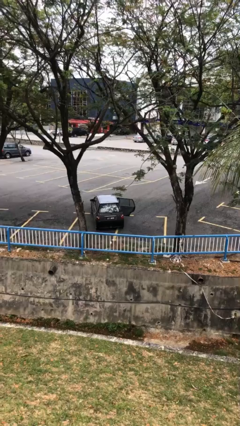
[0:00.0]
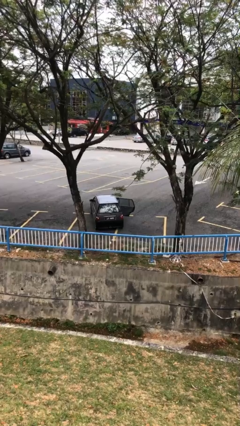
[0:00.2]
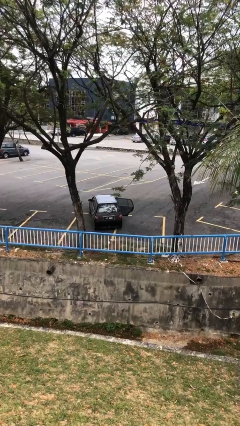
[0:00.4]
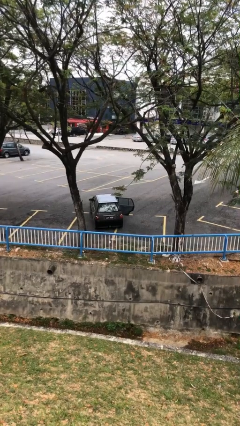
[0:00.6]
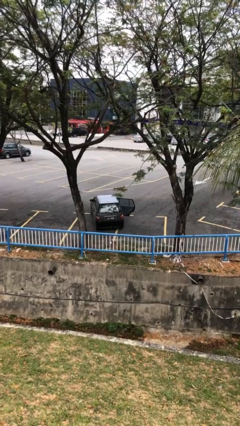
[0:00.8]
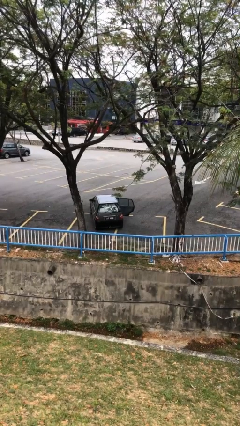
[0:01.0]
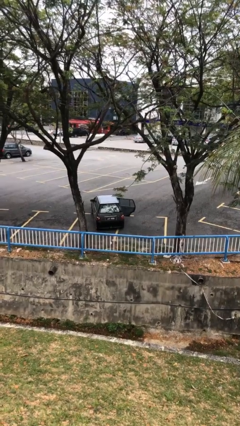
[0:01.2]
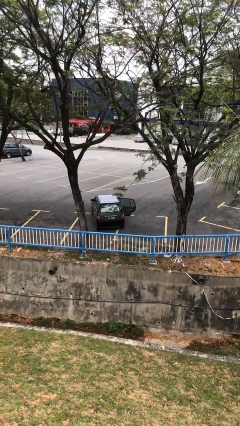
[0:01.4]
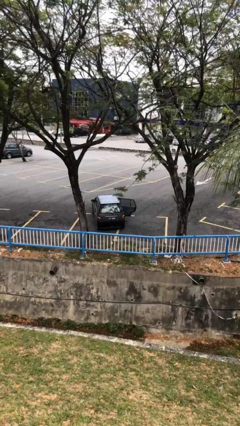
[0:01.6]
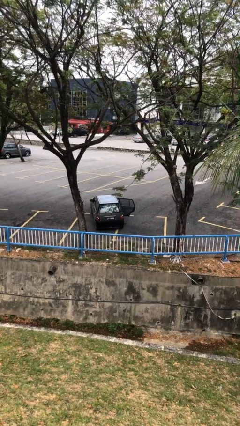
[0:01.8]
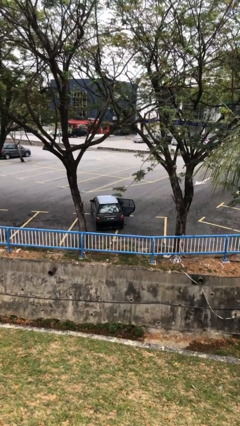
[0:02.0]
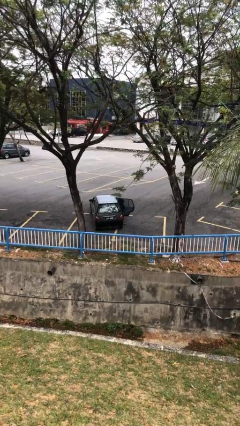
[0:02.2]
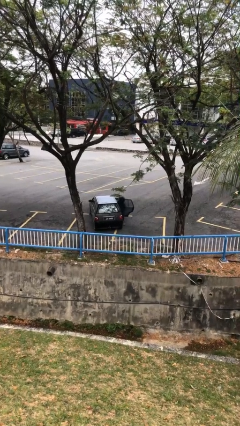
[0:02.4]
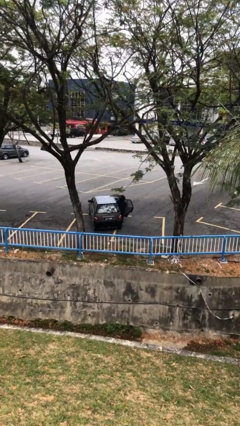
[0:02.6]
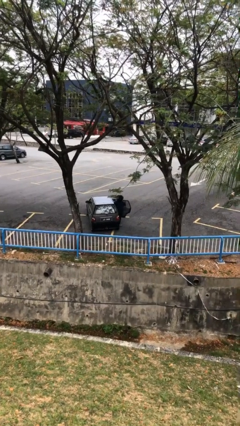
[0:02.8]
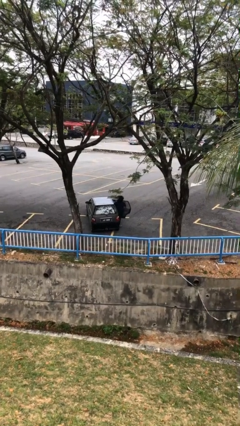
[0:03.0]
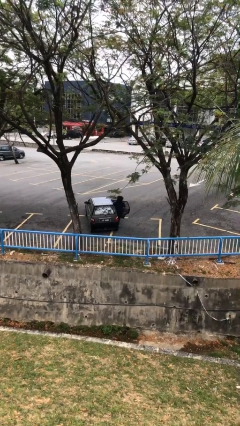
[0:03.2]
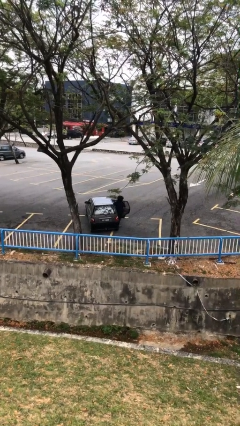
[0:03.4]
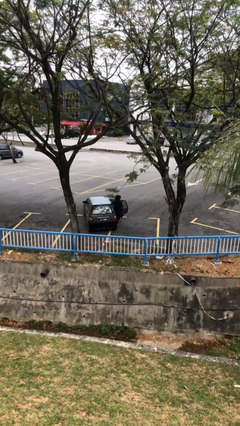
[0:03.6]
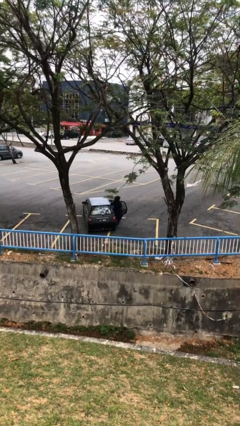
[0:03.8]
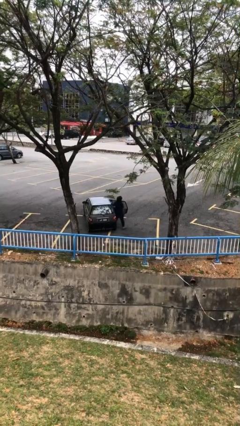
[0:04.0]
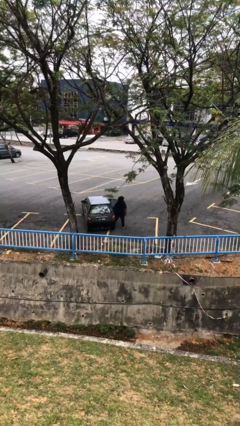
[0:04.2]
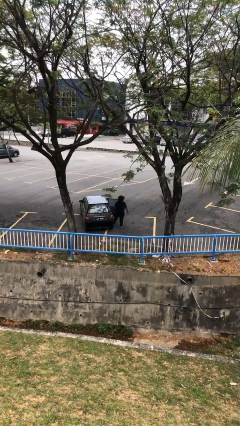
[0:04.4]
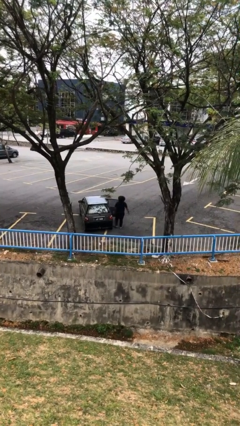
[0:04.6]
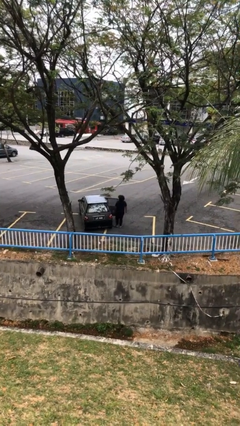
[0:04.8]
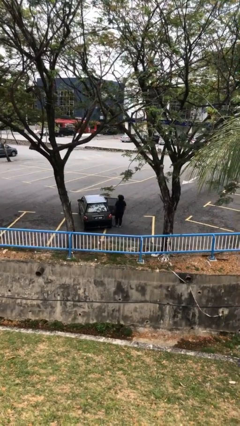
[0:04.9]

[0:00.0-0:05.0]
person exits car

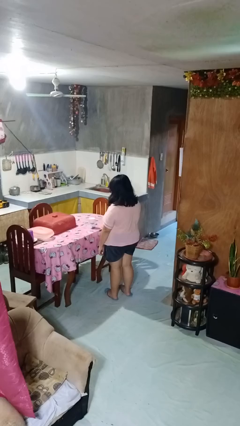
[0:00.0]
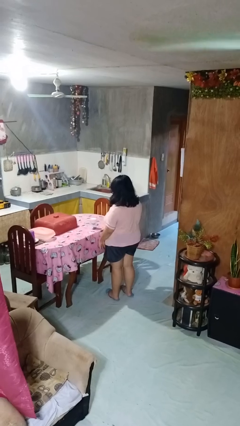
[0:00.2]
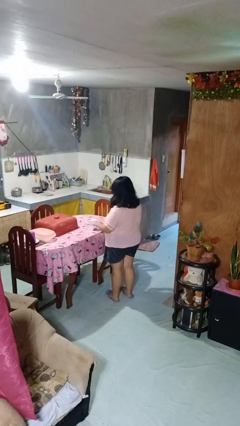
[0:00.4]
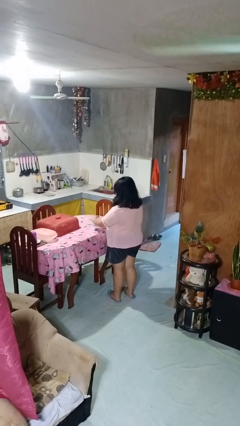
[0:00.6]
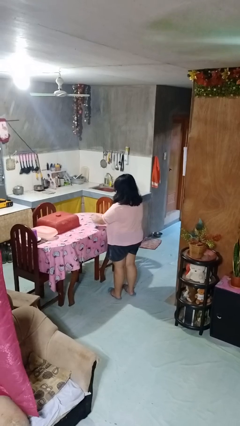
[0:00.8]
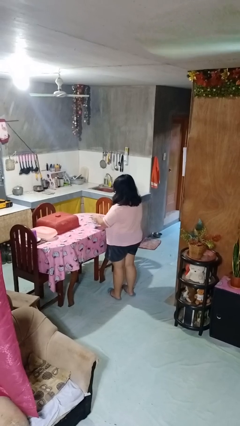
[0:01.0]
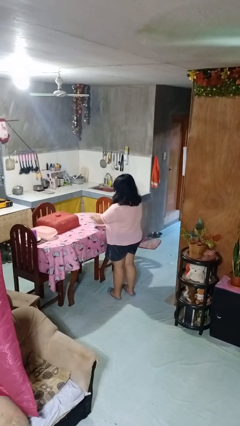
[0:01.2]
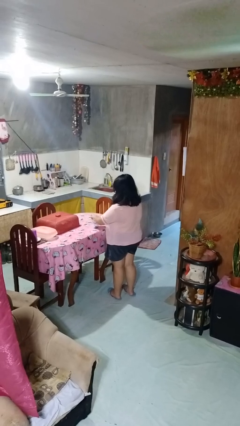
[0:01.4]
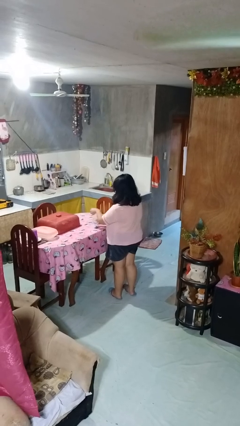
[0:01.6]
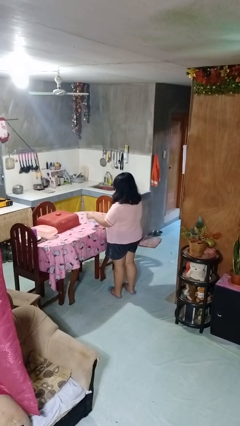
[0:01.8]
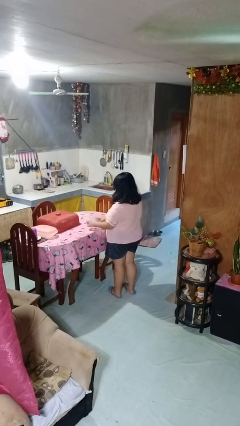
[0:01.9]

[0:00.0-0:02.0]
person opens jar

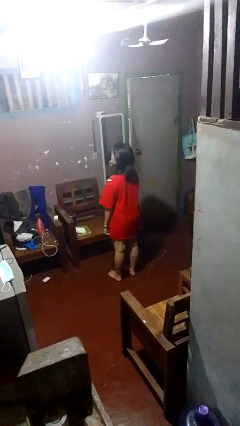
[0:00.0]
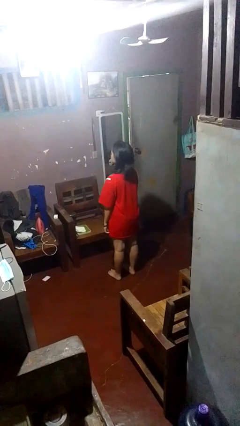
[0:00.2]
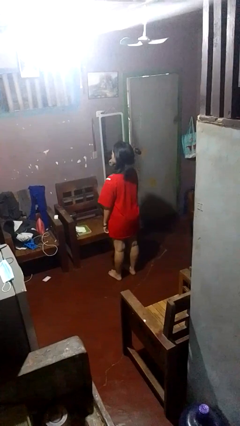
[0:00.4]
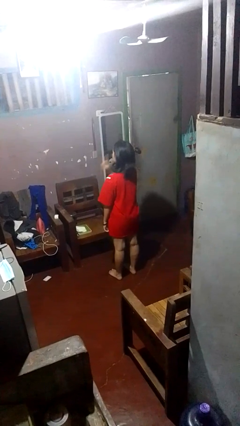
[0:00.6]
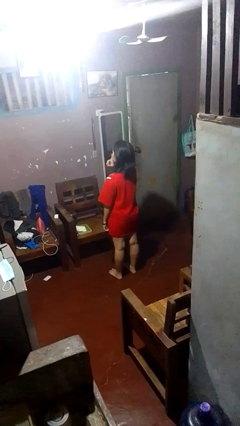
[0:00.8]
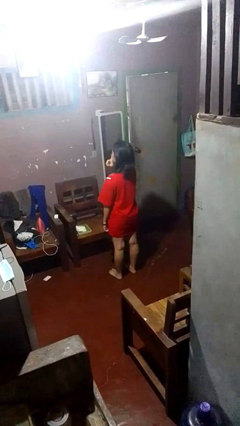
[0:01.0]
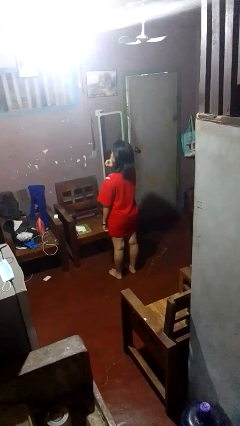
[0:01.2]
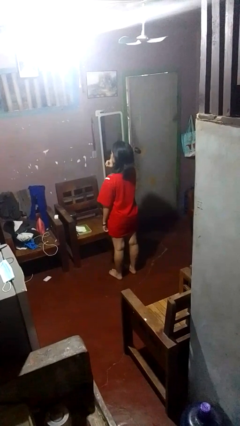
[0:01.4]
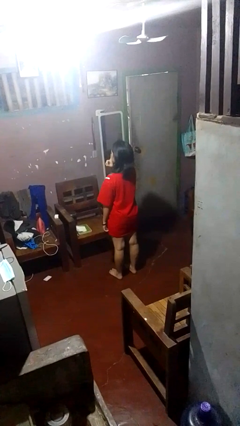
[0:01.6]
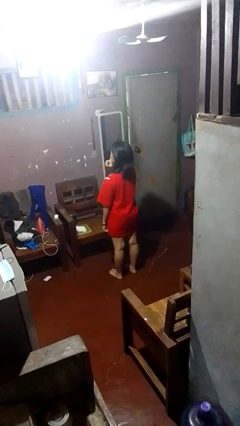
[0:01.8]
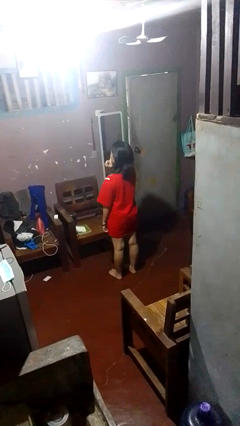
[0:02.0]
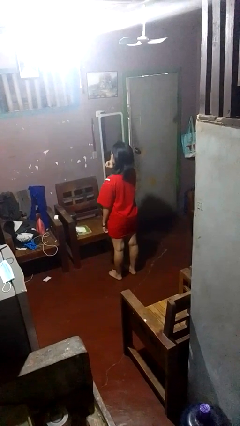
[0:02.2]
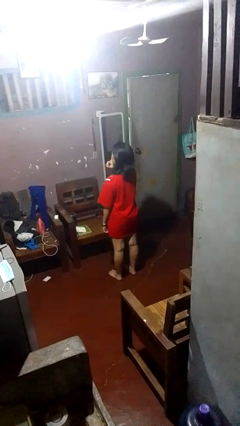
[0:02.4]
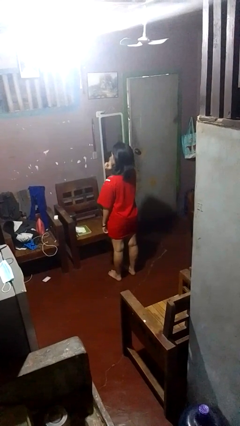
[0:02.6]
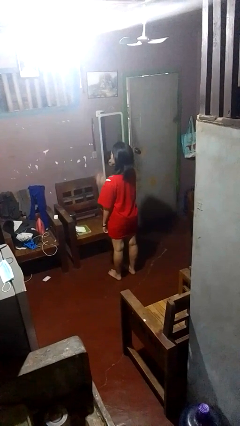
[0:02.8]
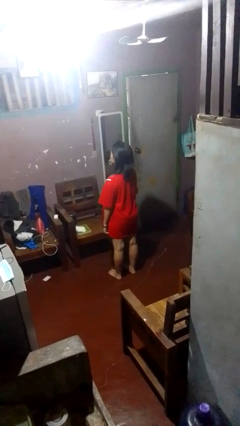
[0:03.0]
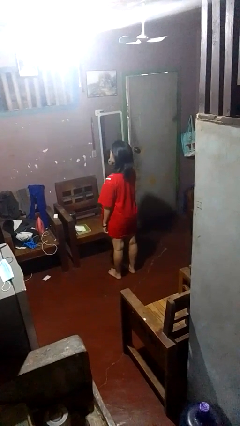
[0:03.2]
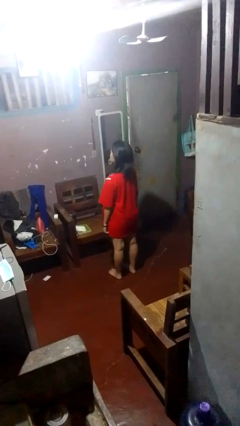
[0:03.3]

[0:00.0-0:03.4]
person gestures be quiet

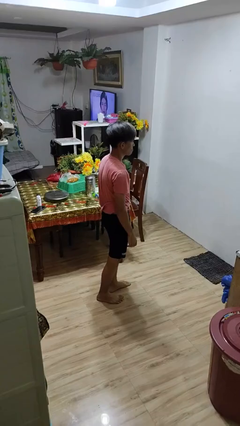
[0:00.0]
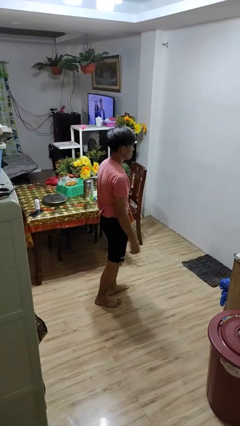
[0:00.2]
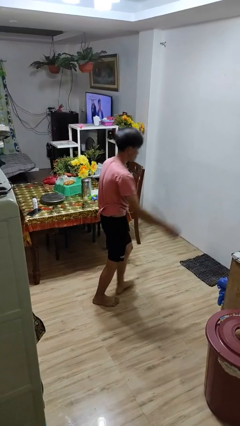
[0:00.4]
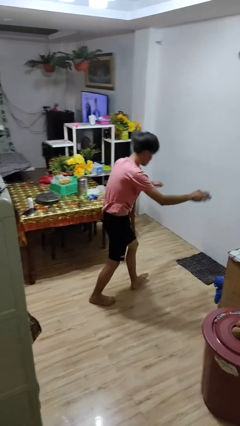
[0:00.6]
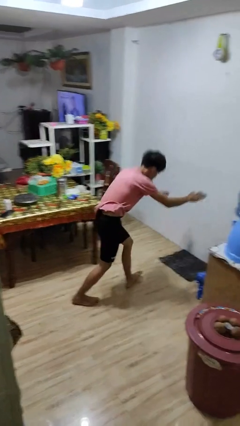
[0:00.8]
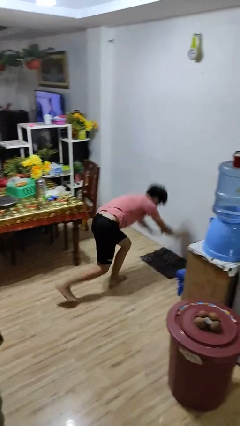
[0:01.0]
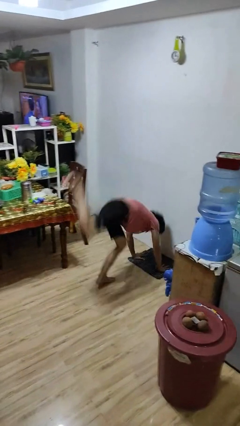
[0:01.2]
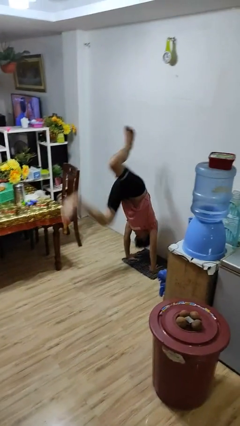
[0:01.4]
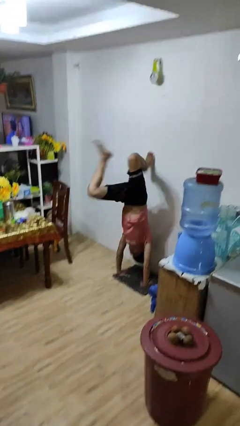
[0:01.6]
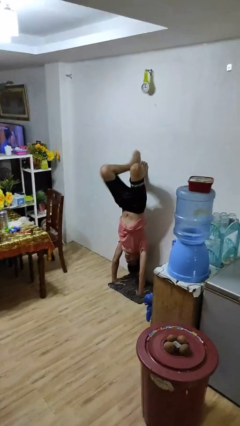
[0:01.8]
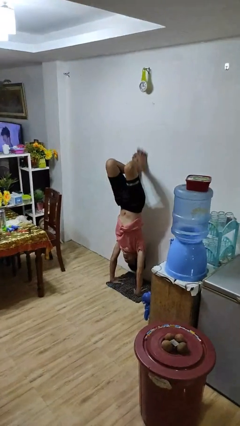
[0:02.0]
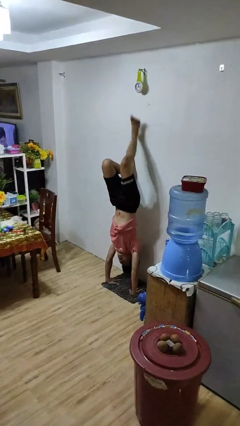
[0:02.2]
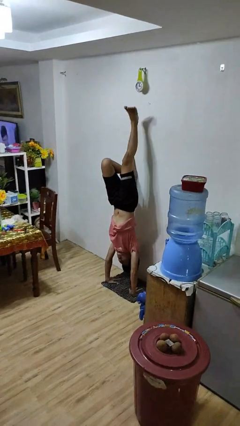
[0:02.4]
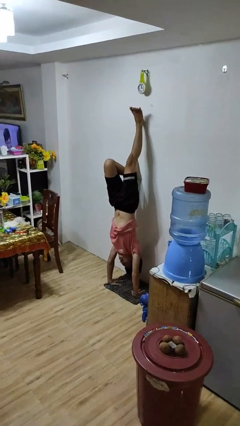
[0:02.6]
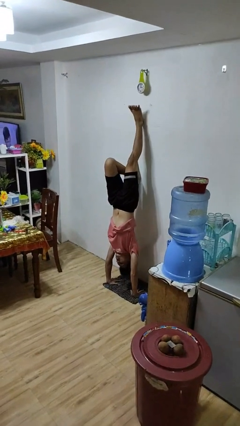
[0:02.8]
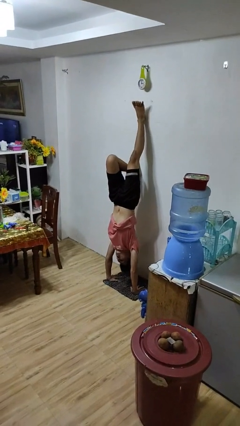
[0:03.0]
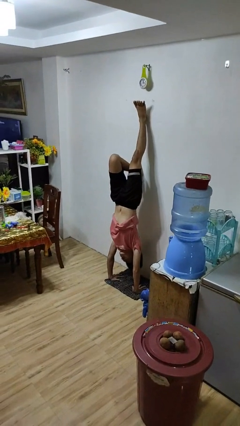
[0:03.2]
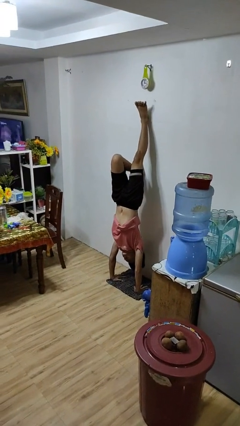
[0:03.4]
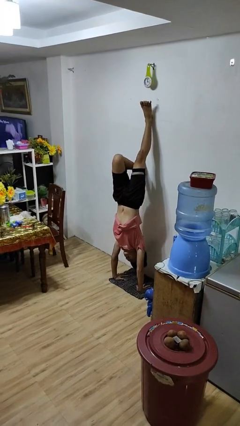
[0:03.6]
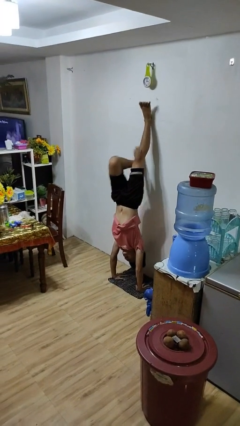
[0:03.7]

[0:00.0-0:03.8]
person handstand

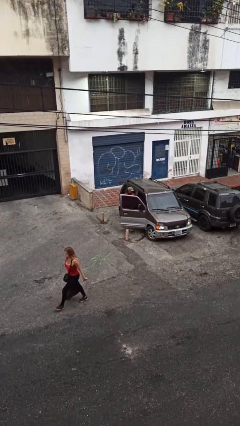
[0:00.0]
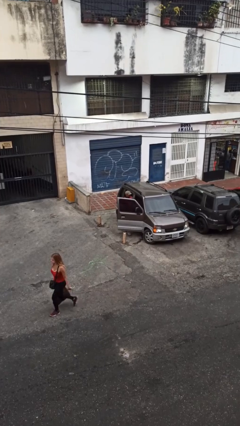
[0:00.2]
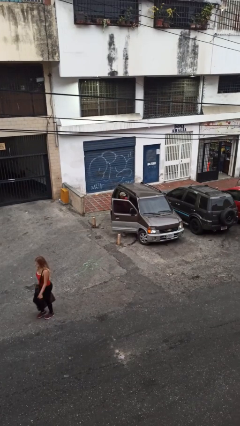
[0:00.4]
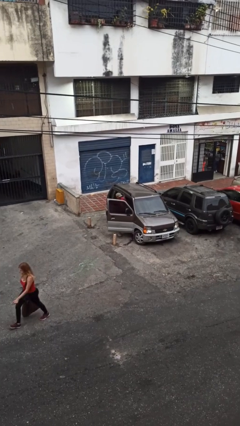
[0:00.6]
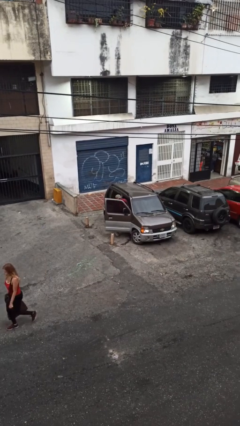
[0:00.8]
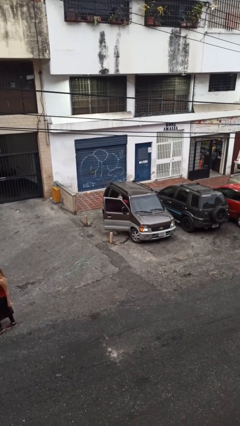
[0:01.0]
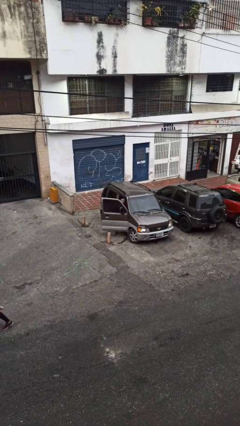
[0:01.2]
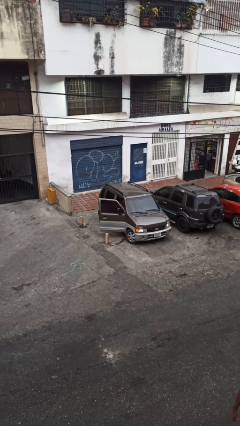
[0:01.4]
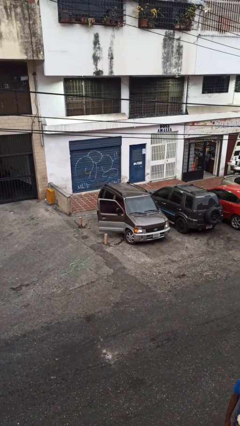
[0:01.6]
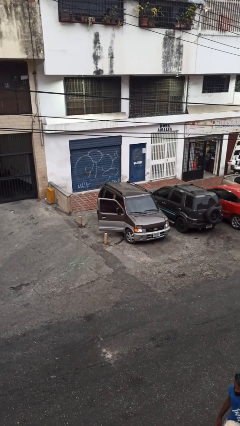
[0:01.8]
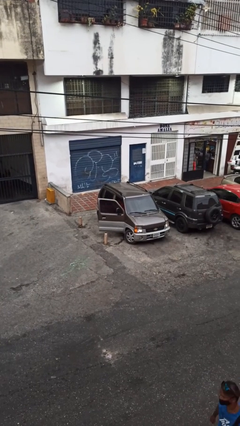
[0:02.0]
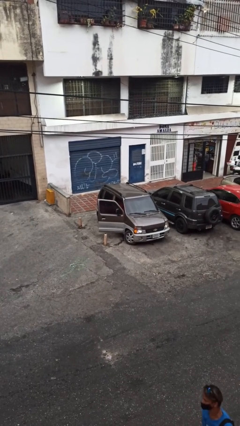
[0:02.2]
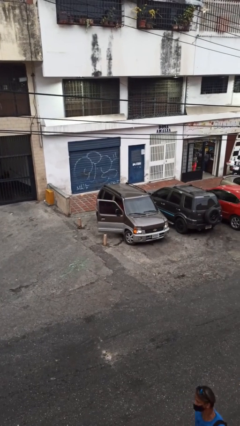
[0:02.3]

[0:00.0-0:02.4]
person enters car

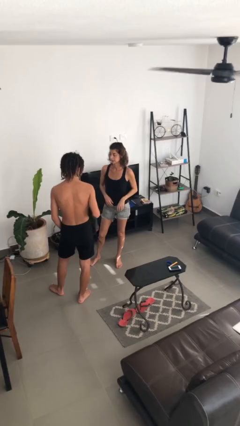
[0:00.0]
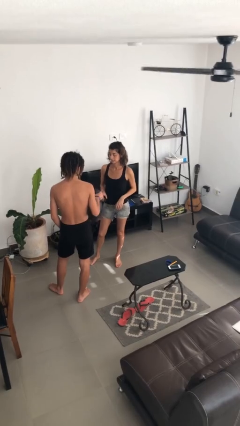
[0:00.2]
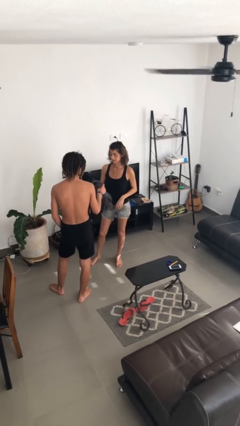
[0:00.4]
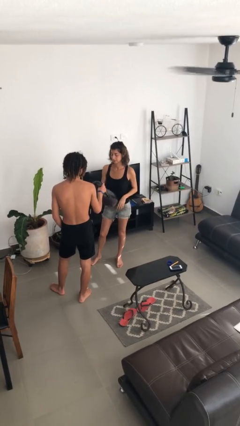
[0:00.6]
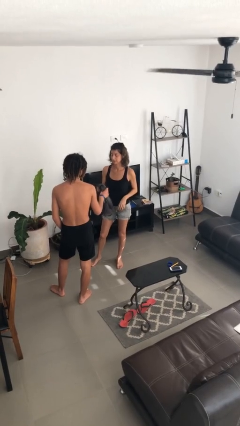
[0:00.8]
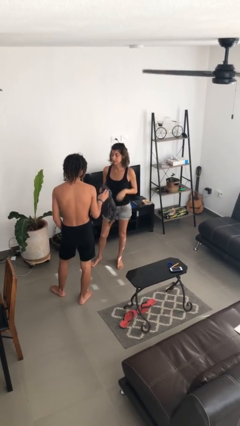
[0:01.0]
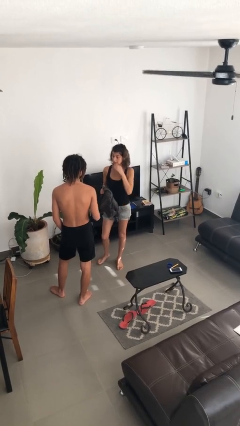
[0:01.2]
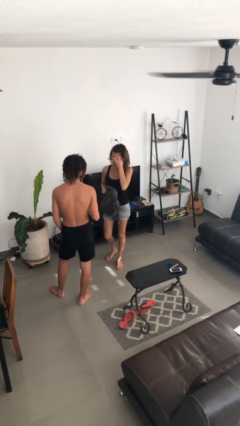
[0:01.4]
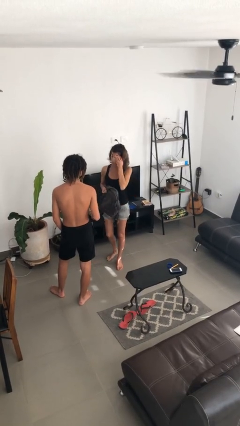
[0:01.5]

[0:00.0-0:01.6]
person transfers object to person
